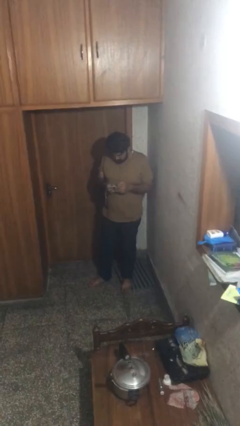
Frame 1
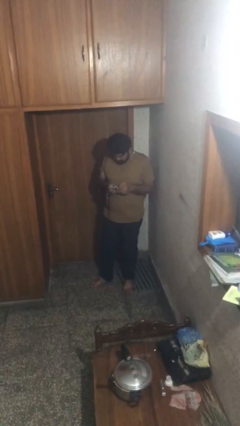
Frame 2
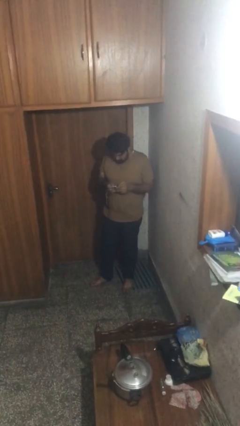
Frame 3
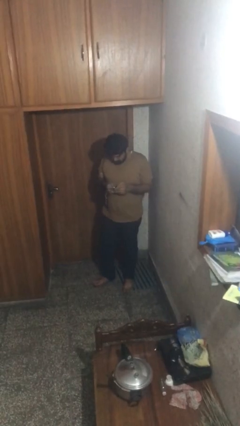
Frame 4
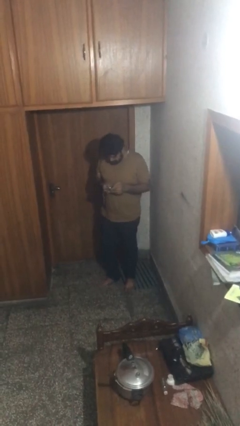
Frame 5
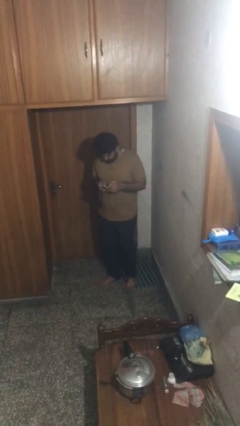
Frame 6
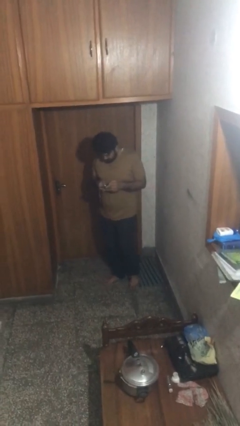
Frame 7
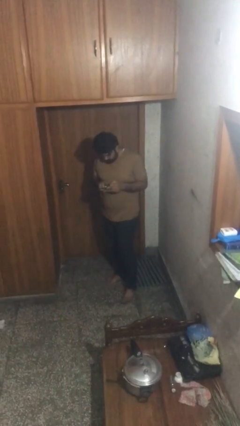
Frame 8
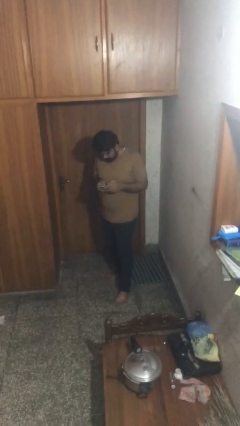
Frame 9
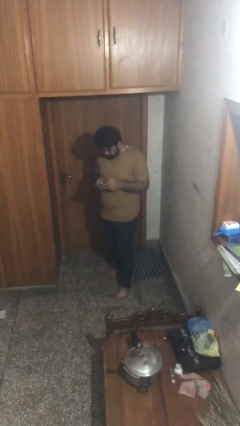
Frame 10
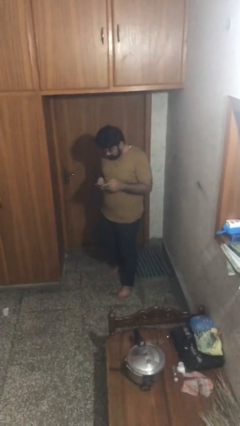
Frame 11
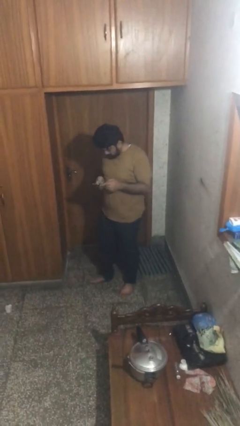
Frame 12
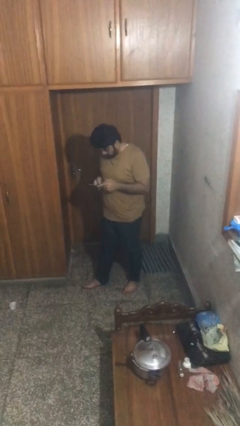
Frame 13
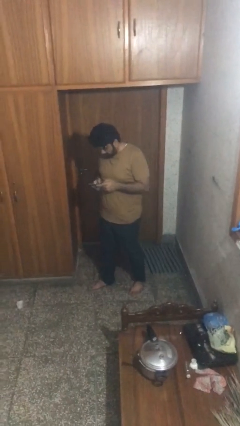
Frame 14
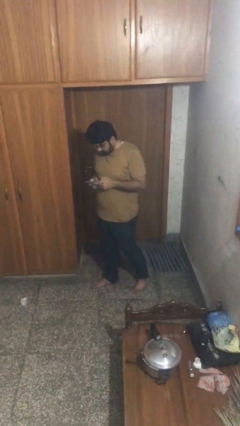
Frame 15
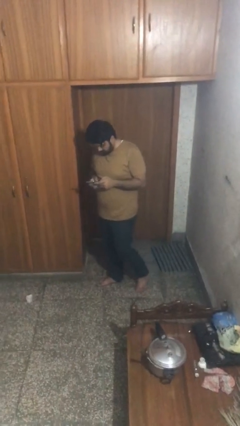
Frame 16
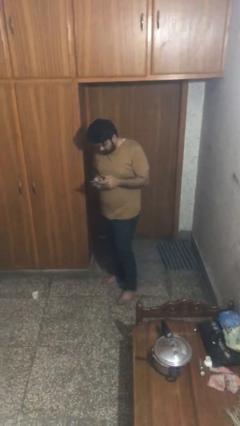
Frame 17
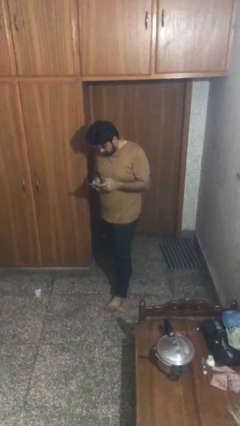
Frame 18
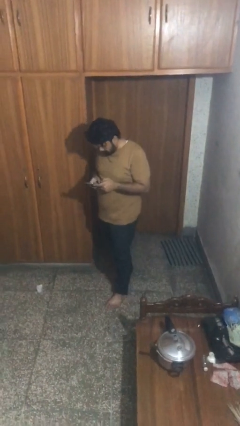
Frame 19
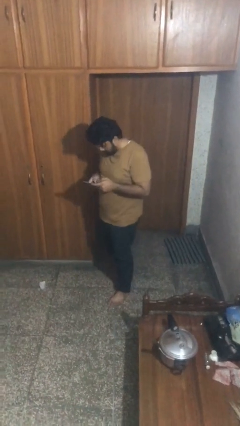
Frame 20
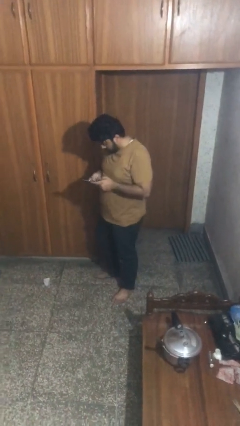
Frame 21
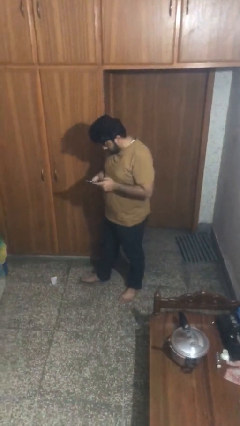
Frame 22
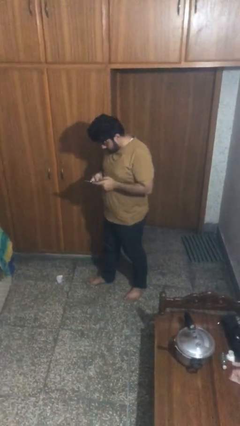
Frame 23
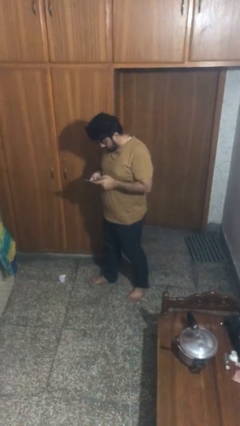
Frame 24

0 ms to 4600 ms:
person texts on phone

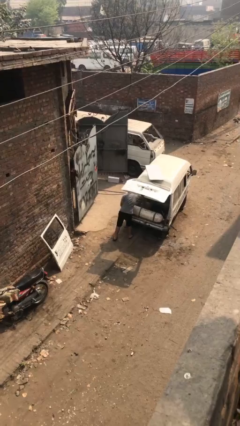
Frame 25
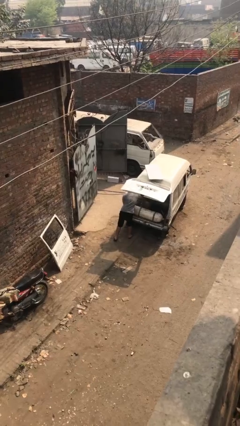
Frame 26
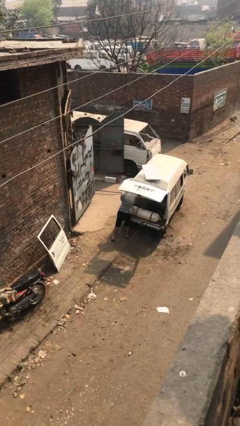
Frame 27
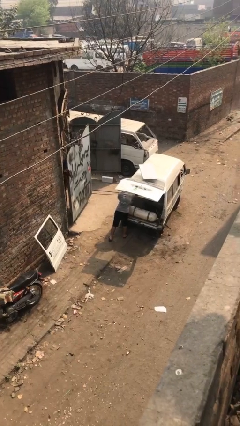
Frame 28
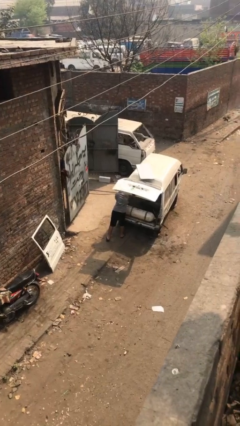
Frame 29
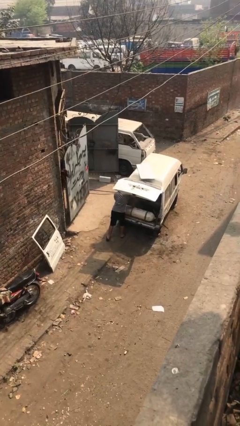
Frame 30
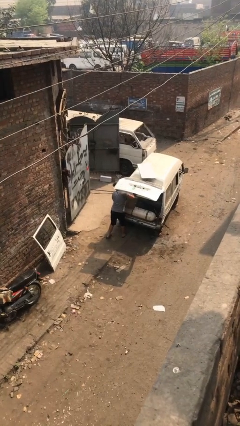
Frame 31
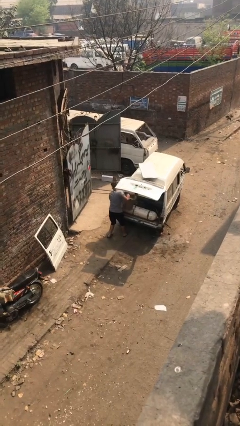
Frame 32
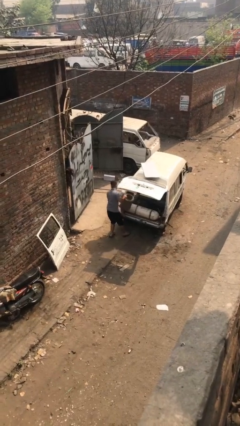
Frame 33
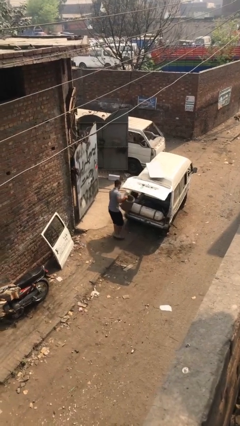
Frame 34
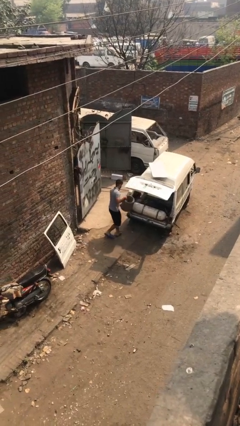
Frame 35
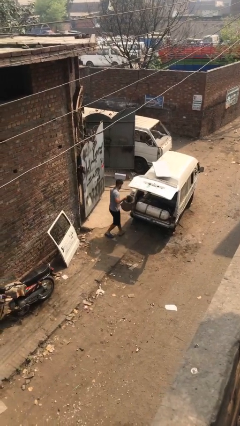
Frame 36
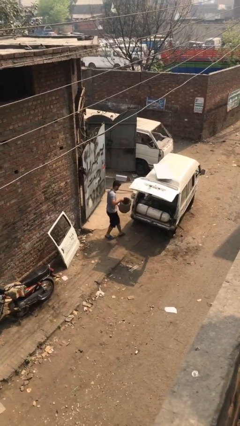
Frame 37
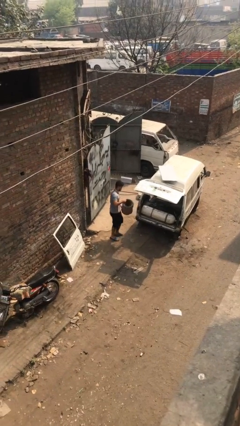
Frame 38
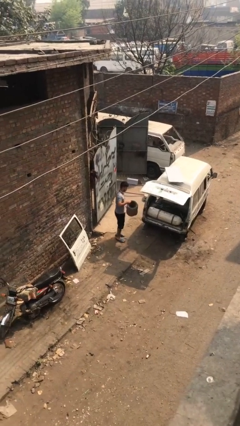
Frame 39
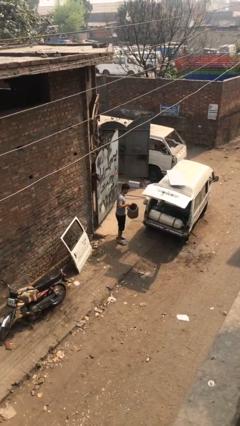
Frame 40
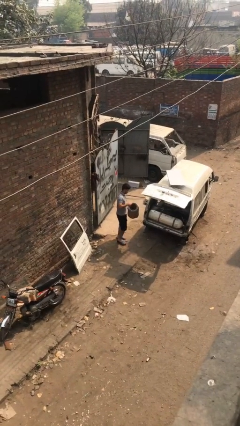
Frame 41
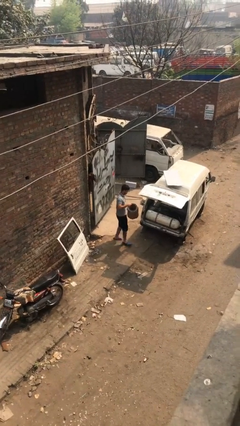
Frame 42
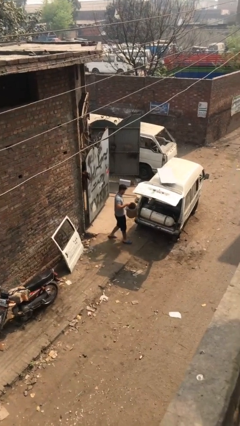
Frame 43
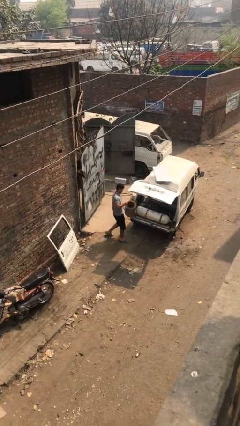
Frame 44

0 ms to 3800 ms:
person unloads car

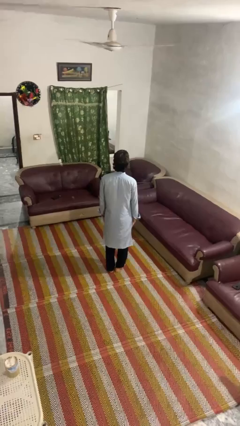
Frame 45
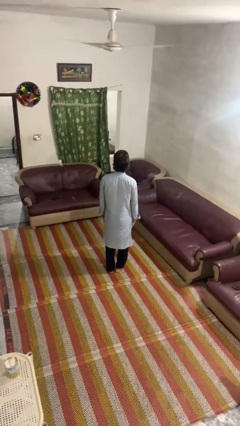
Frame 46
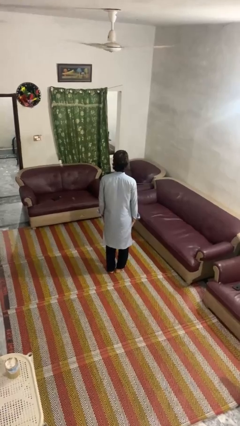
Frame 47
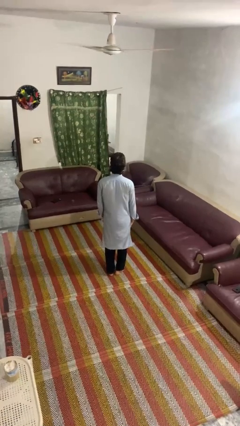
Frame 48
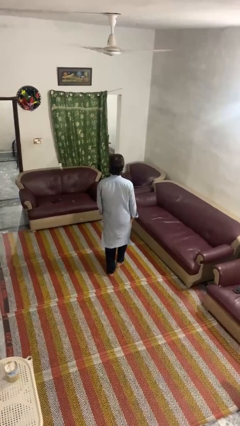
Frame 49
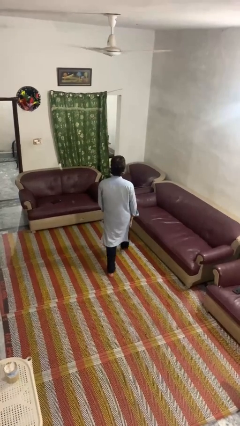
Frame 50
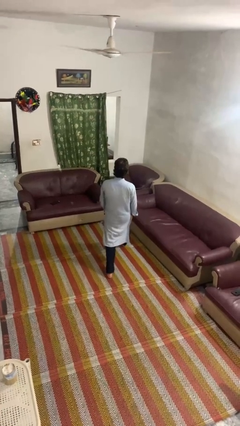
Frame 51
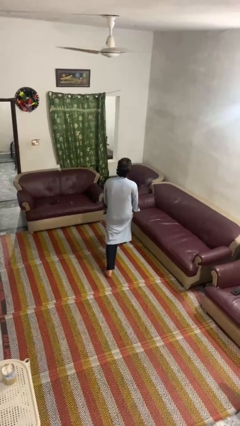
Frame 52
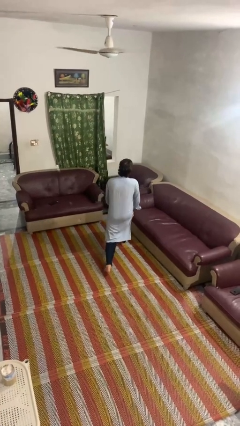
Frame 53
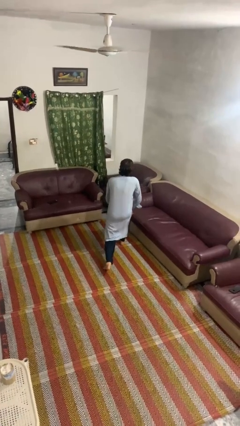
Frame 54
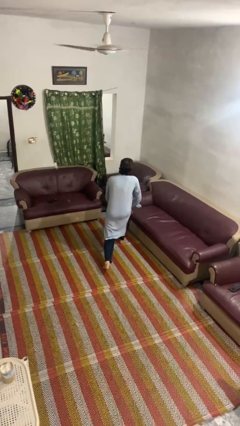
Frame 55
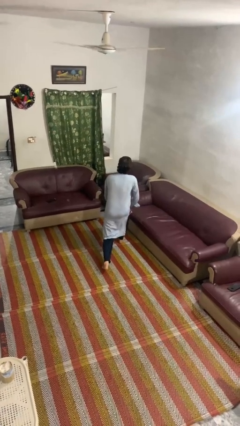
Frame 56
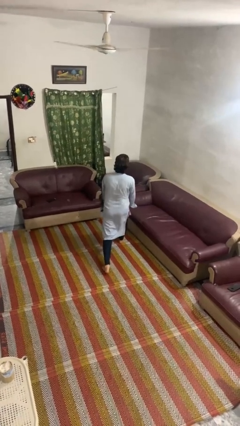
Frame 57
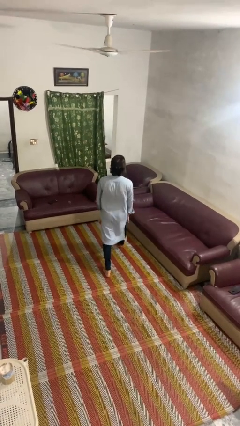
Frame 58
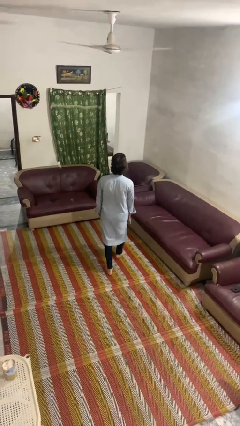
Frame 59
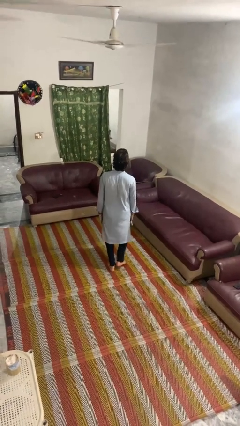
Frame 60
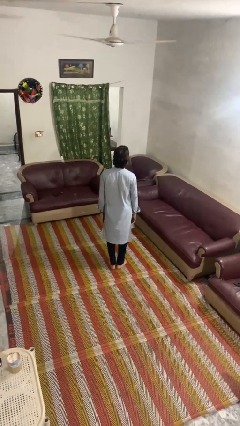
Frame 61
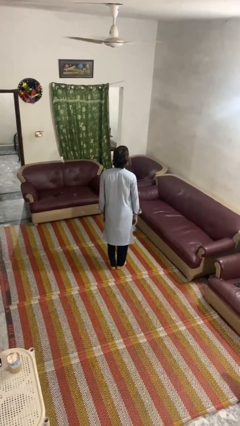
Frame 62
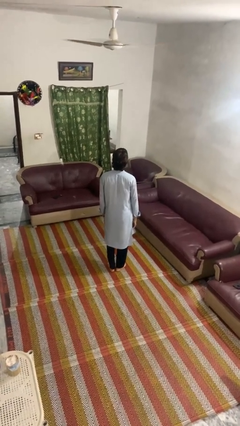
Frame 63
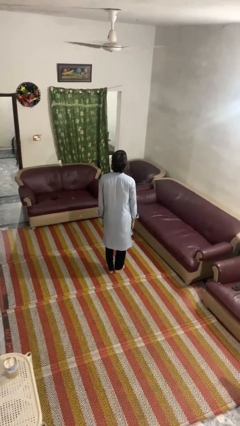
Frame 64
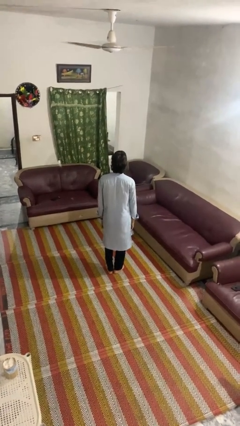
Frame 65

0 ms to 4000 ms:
person exercises with lunges

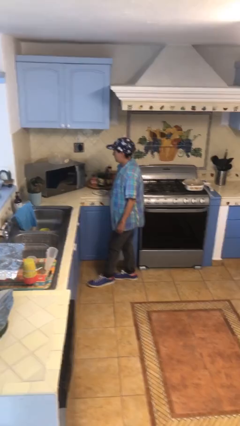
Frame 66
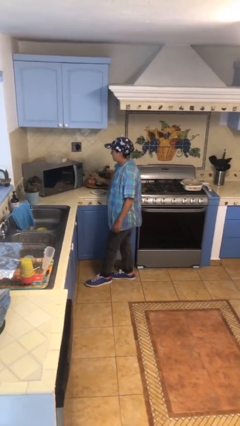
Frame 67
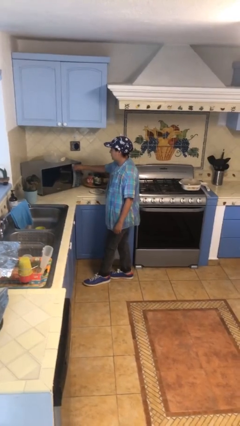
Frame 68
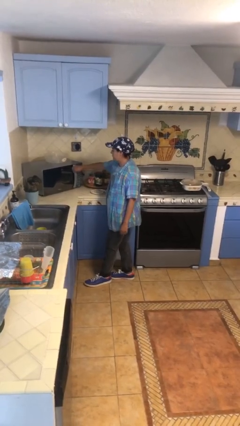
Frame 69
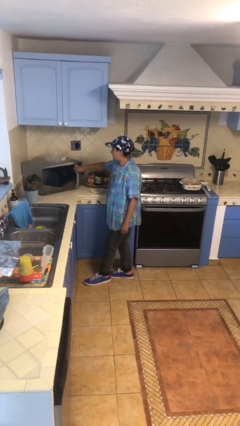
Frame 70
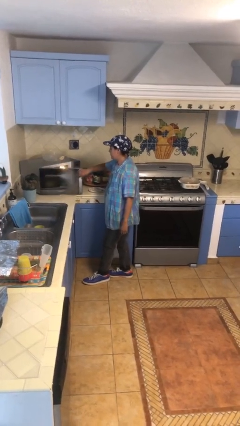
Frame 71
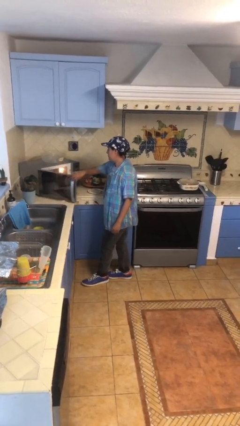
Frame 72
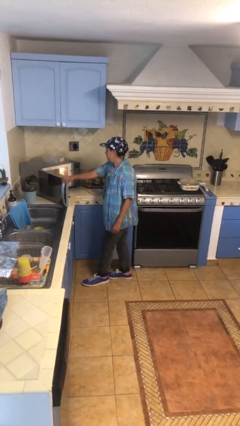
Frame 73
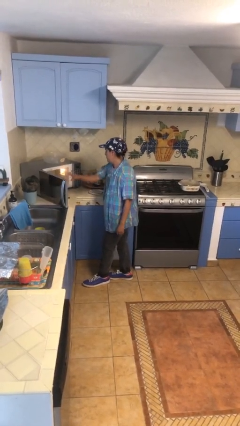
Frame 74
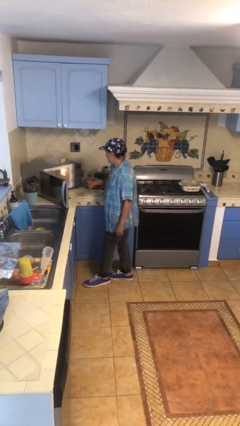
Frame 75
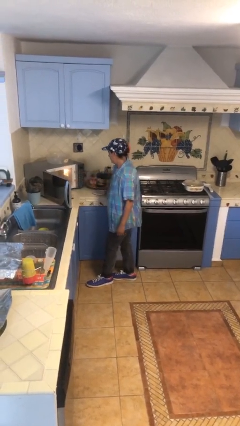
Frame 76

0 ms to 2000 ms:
person opens microwave

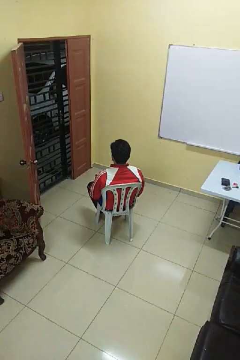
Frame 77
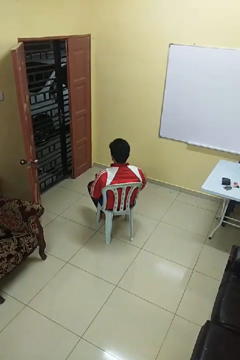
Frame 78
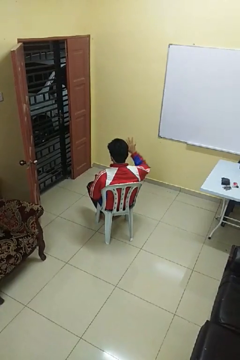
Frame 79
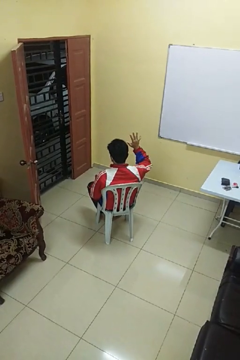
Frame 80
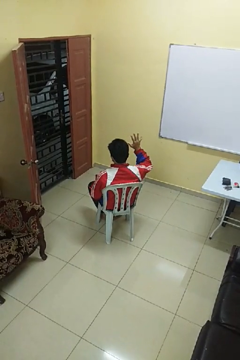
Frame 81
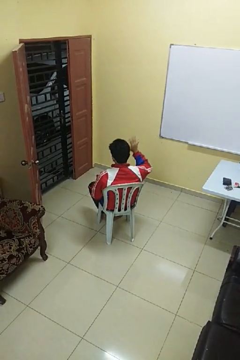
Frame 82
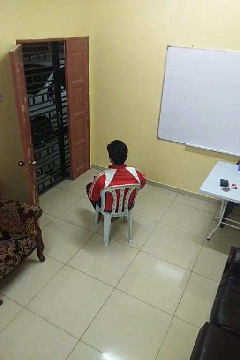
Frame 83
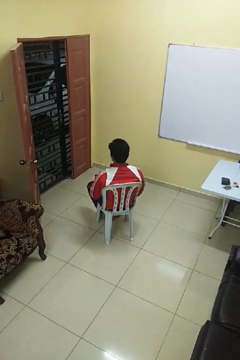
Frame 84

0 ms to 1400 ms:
person gestures number five

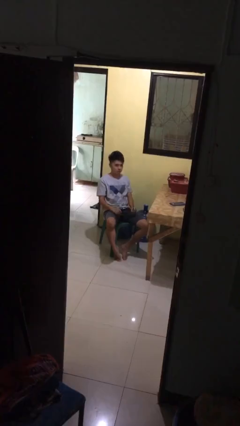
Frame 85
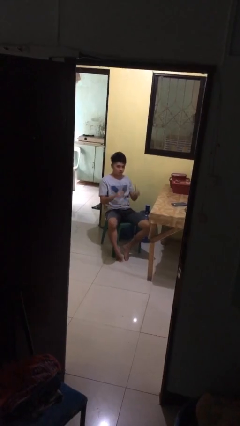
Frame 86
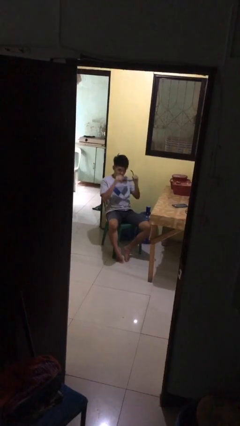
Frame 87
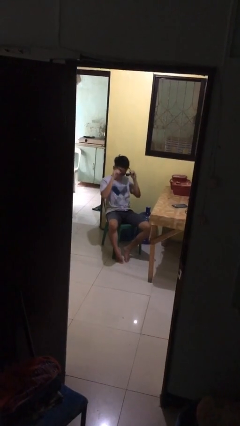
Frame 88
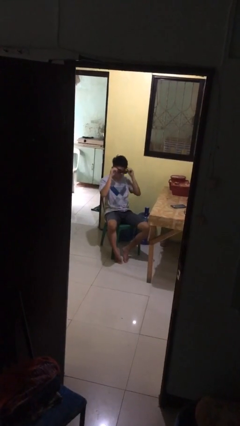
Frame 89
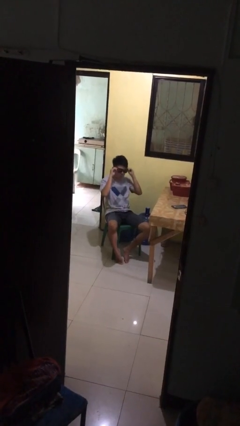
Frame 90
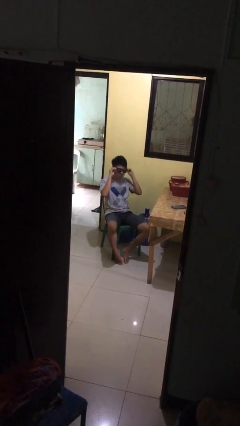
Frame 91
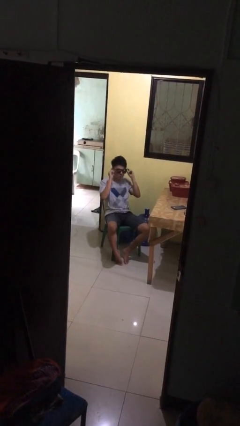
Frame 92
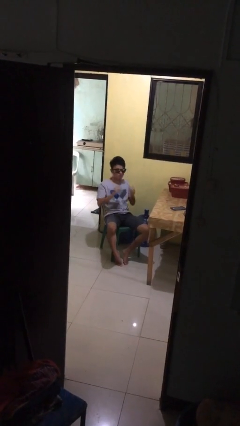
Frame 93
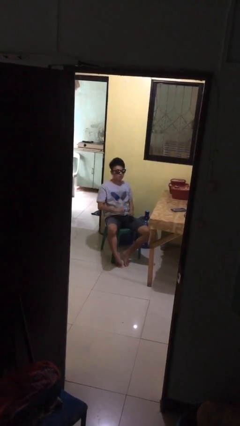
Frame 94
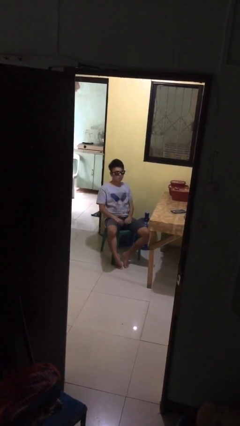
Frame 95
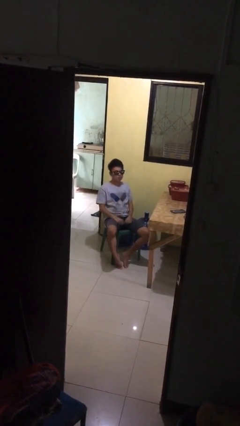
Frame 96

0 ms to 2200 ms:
person puts on sunglasses
